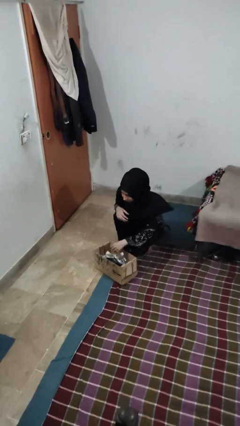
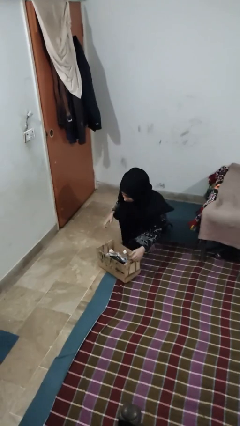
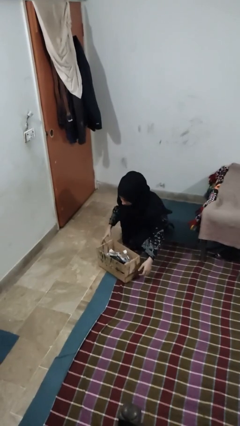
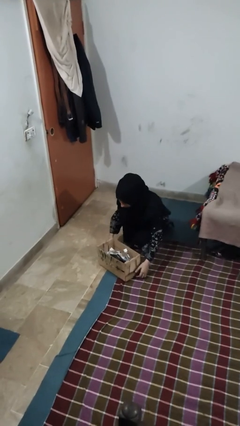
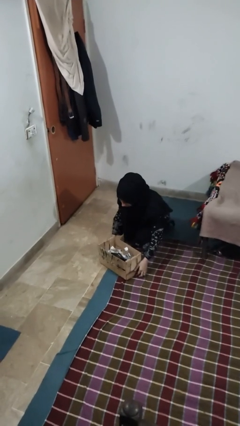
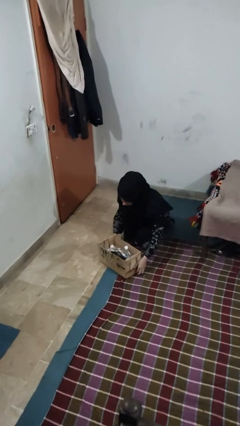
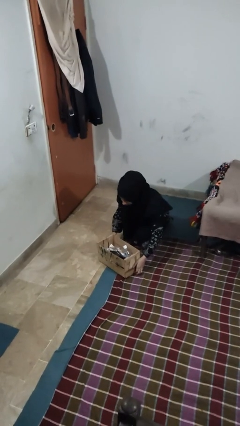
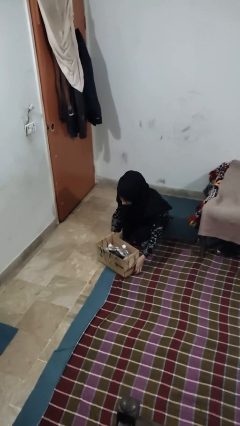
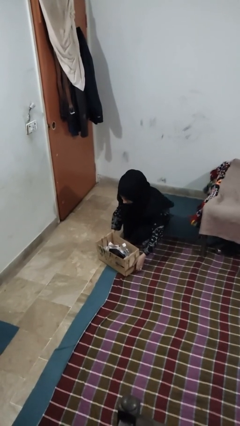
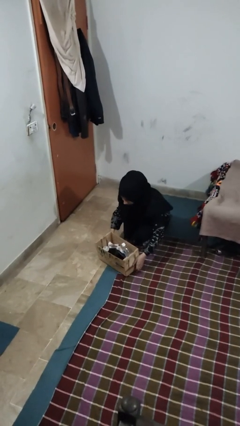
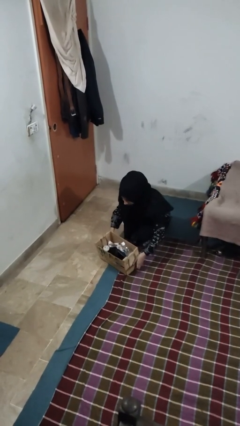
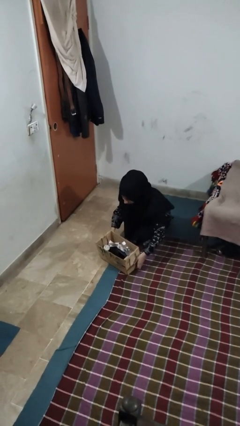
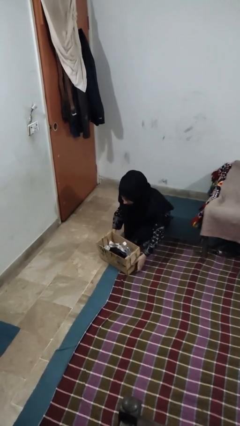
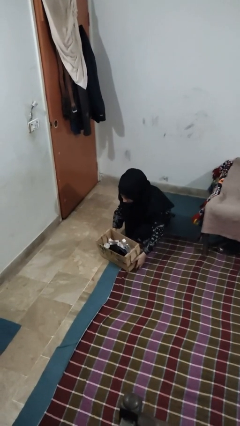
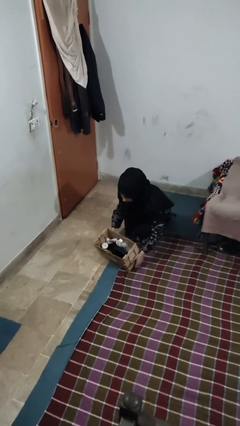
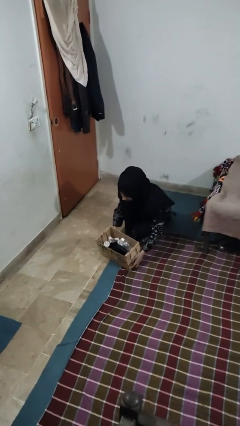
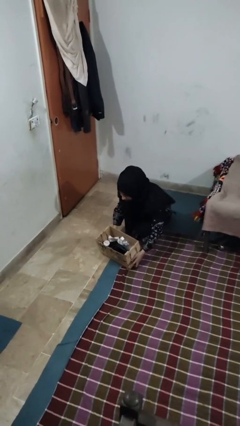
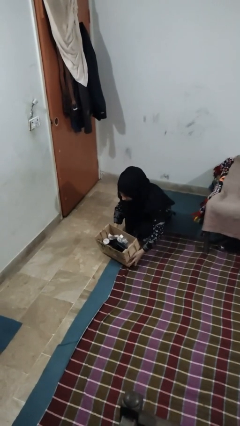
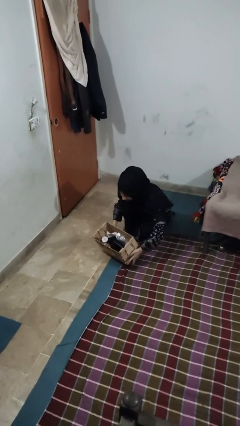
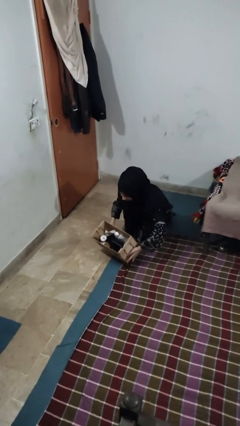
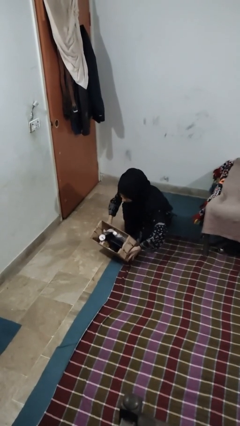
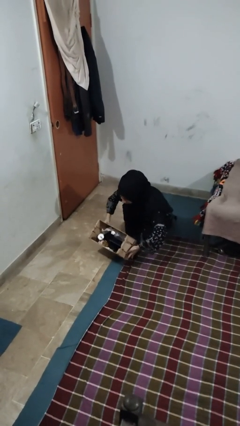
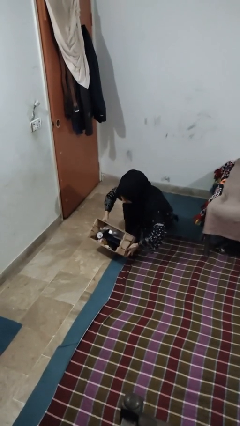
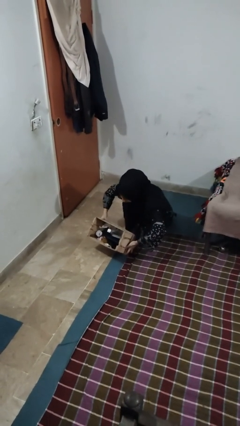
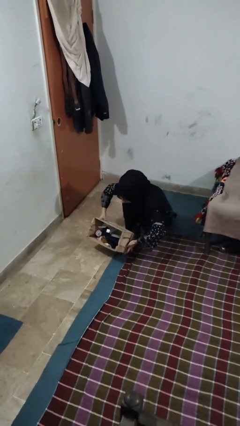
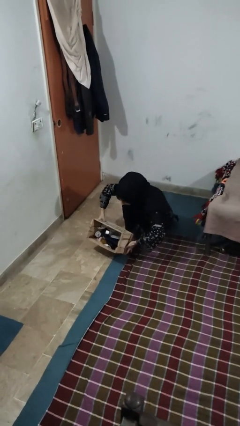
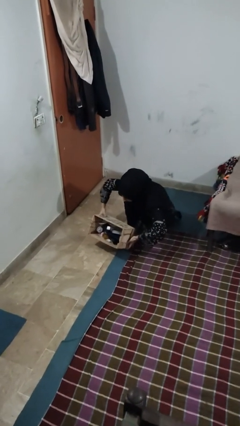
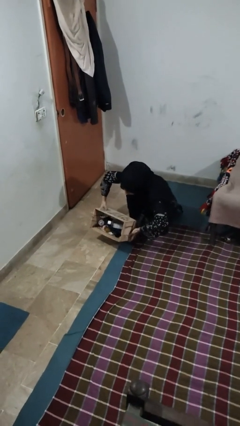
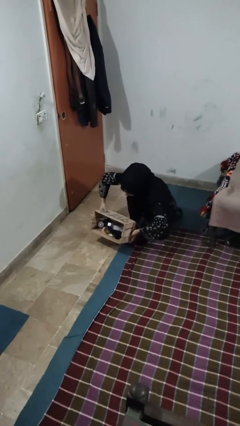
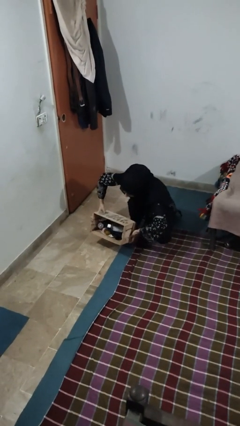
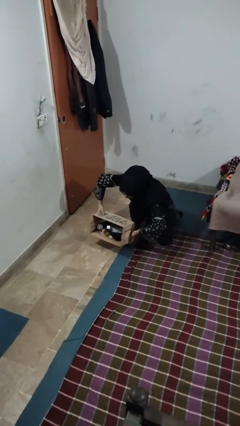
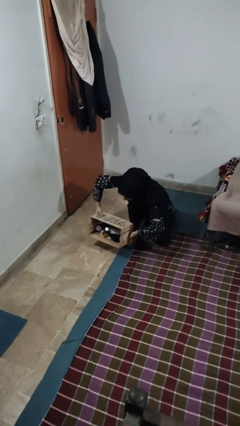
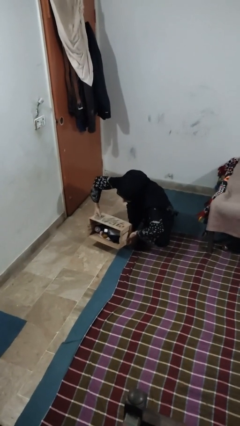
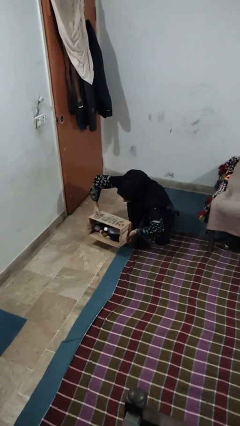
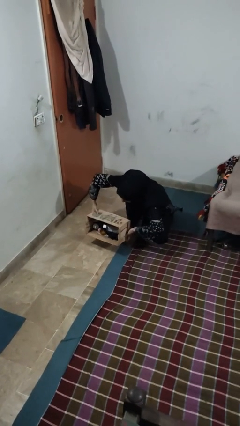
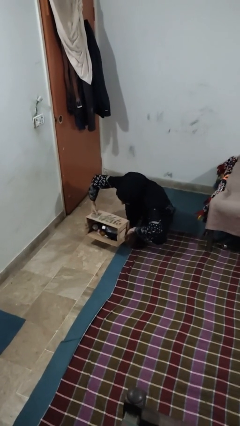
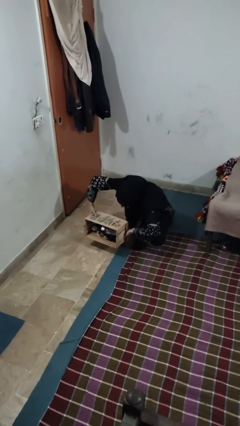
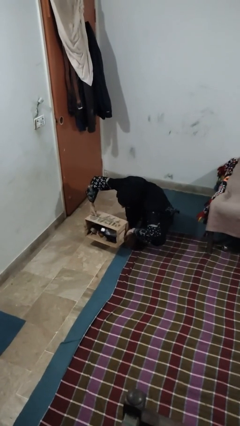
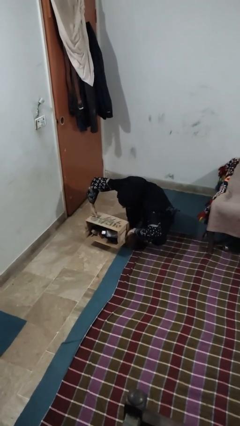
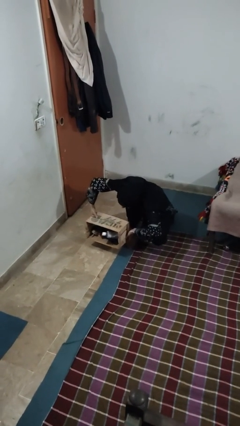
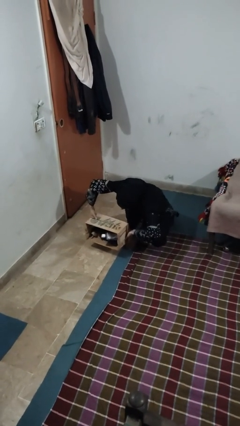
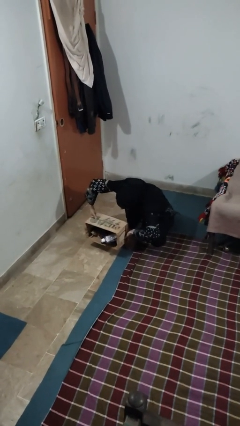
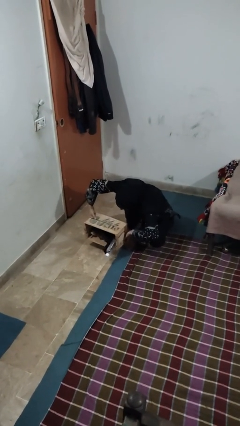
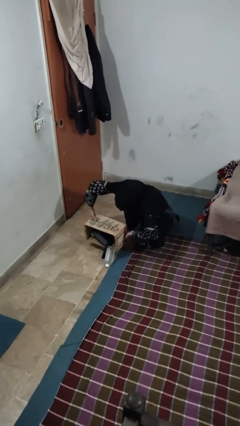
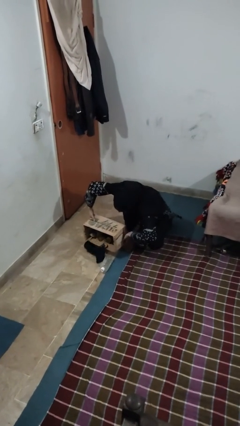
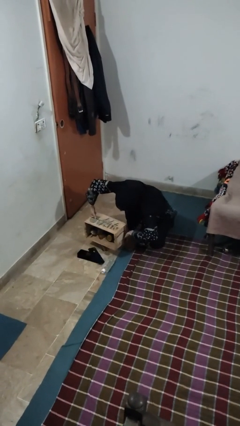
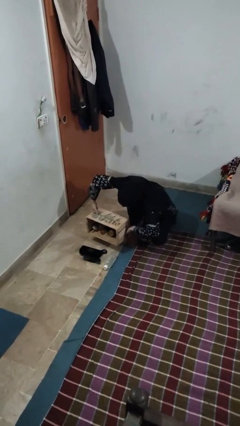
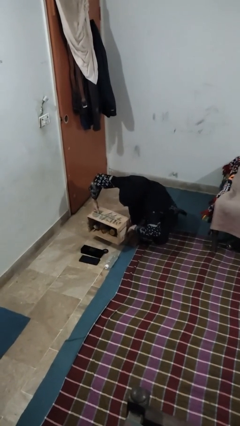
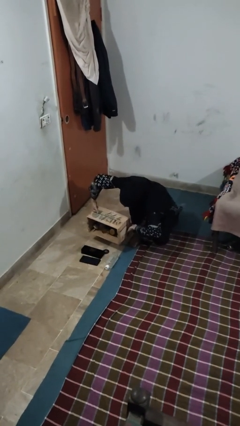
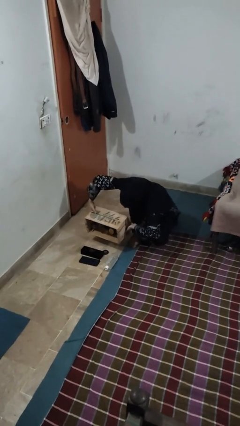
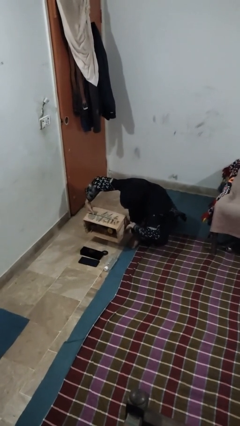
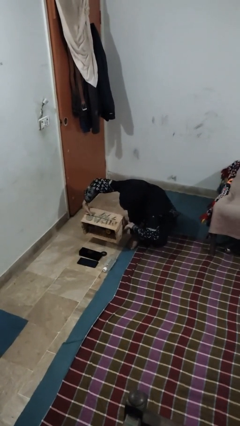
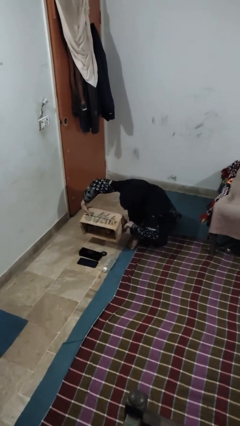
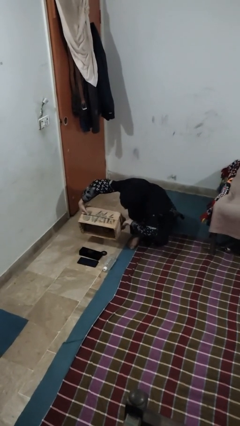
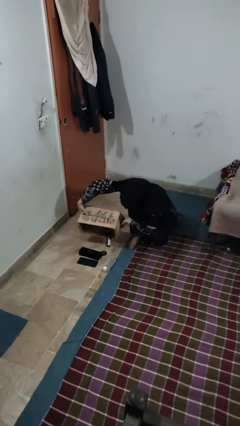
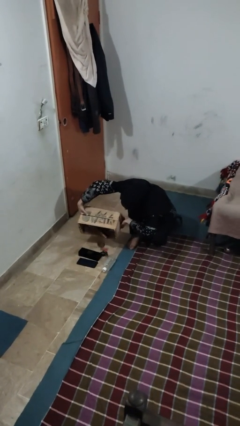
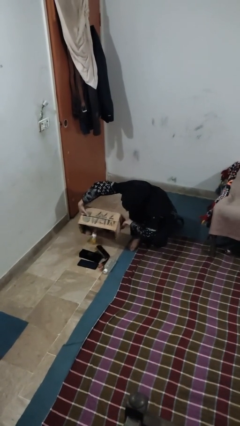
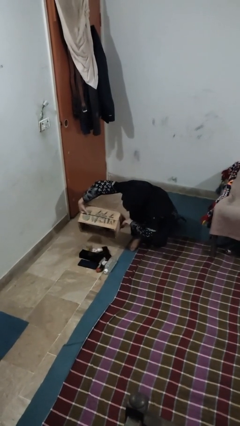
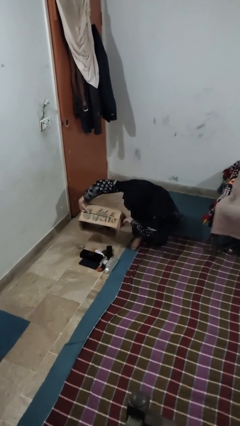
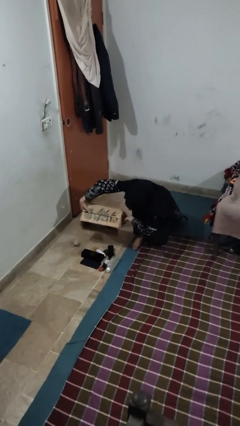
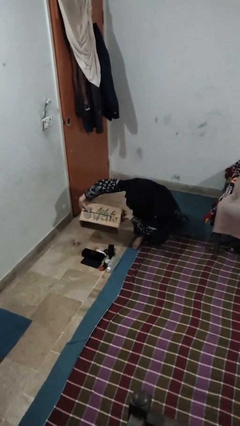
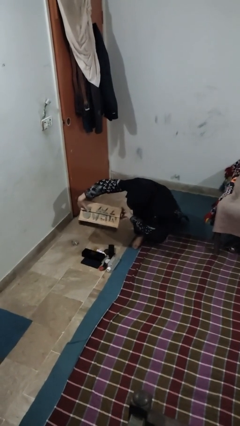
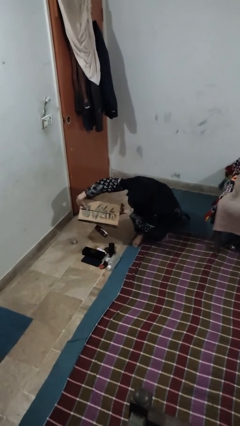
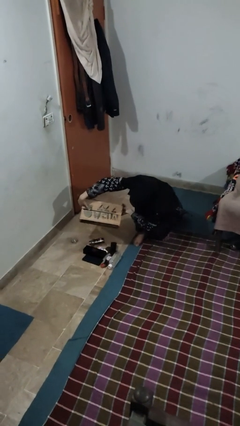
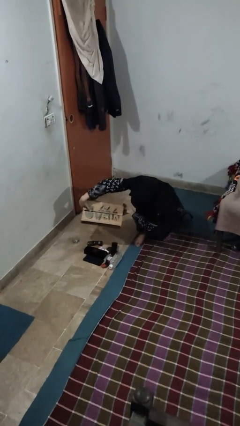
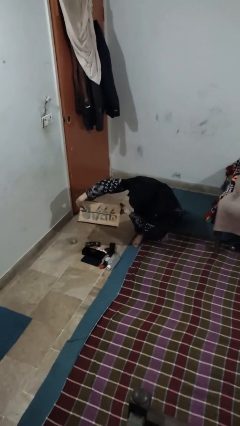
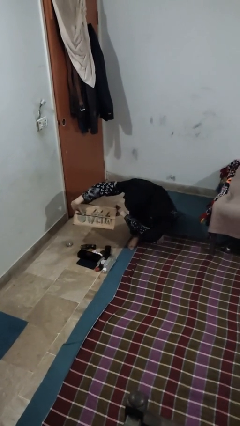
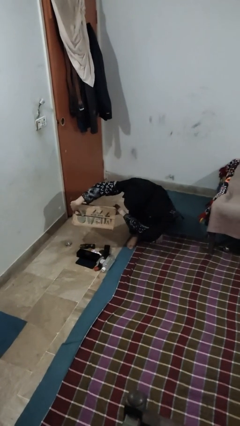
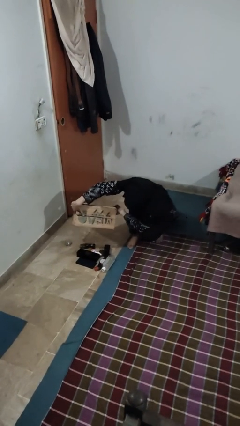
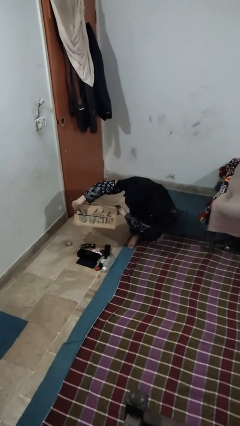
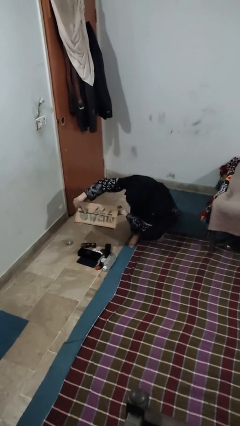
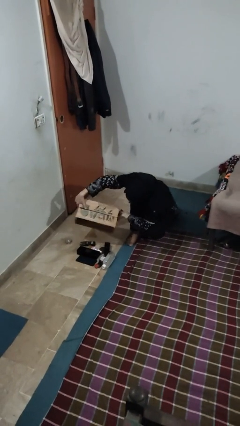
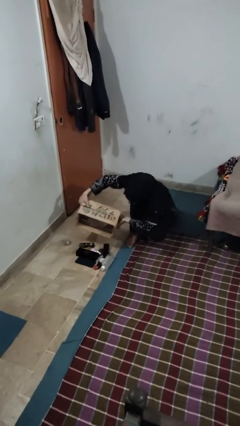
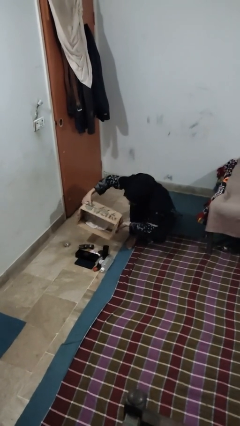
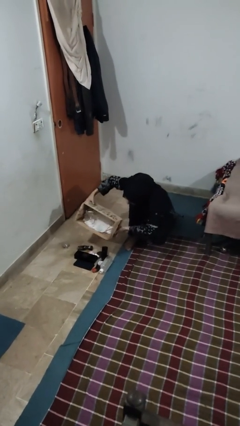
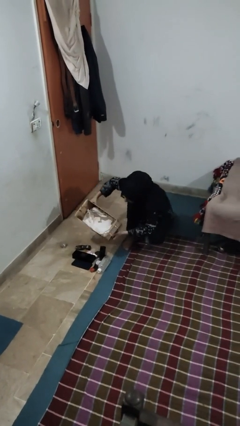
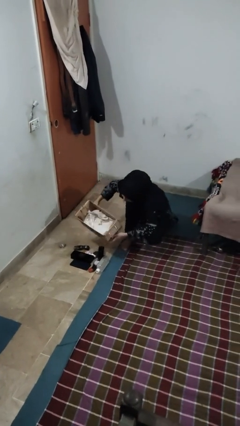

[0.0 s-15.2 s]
person unloads box onto floor

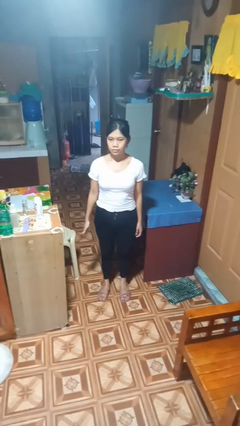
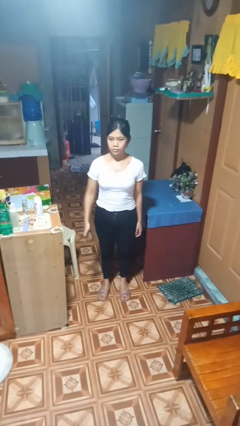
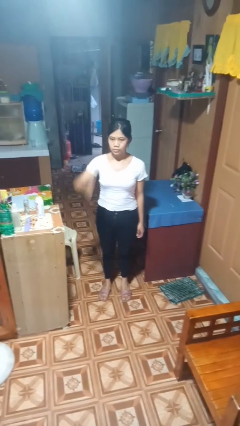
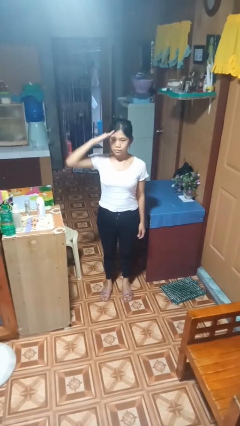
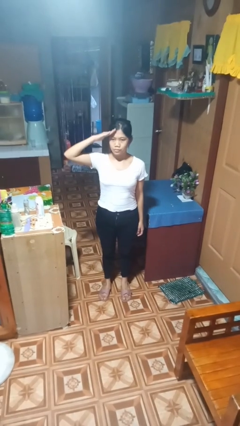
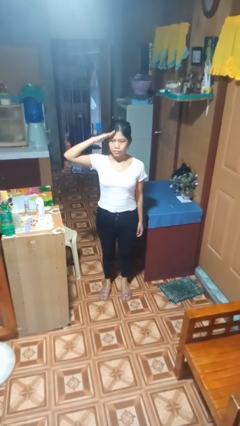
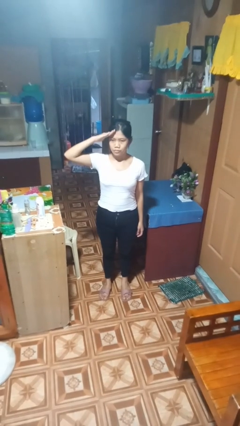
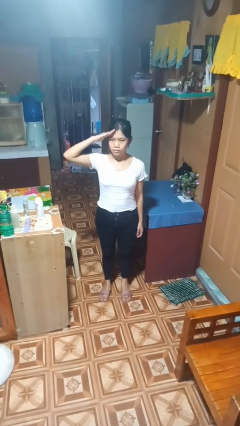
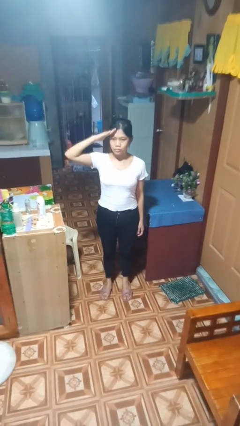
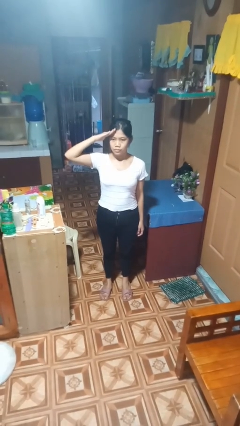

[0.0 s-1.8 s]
person salutes

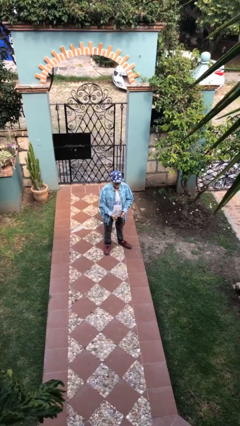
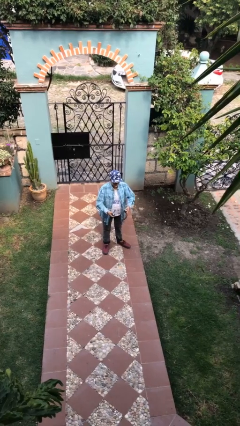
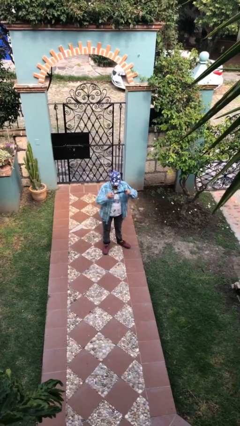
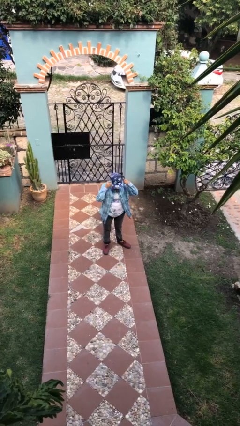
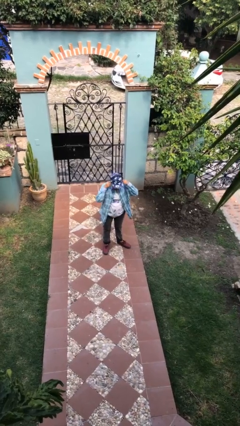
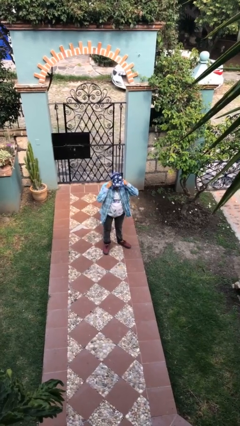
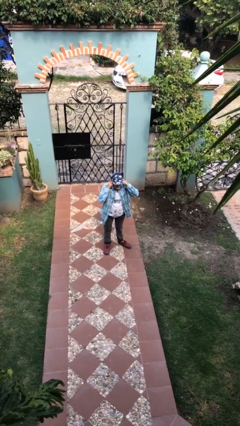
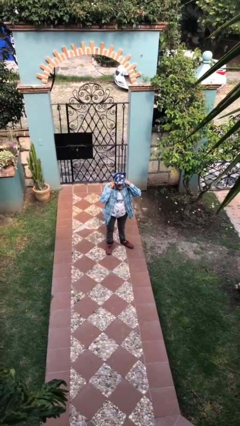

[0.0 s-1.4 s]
person puts on headphones
